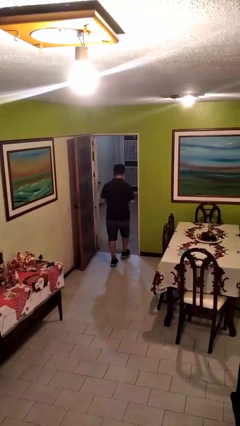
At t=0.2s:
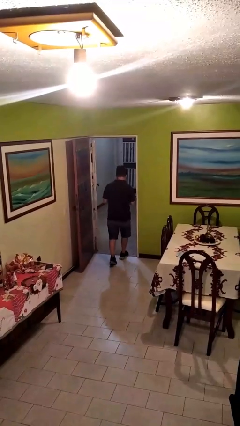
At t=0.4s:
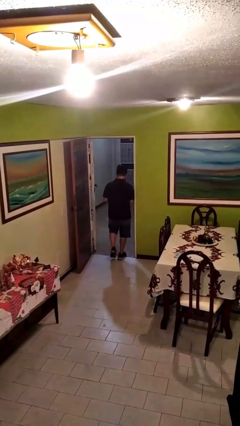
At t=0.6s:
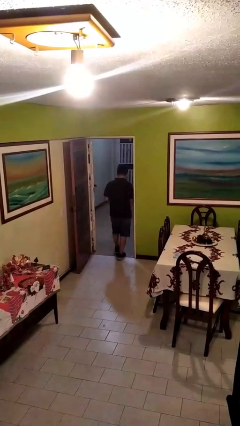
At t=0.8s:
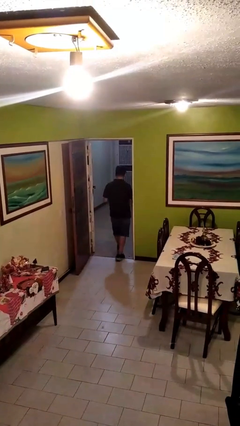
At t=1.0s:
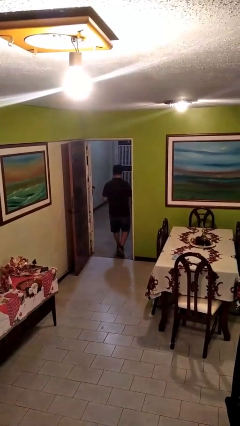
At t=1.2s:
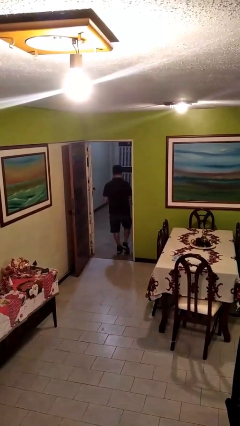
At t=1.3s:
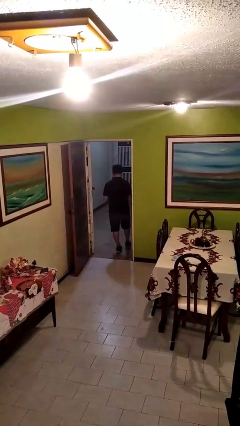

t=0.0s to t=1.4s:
person exits scene through structure

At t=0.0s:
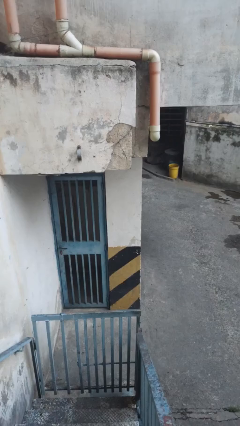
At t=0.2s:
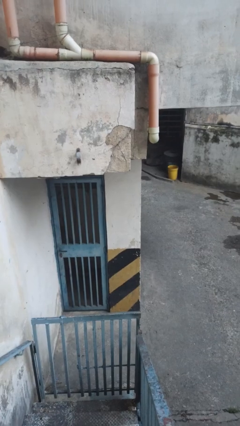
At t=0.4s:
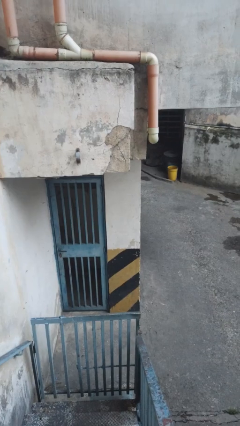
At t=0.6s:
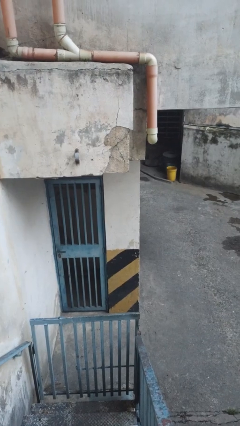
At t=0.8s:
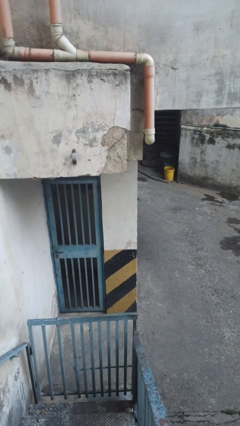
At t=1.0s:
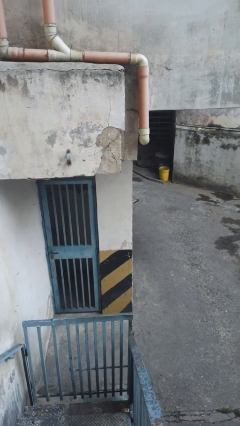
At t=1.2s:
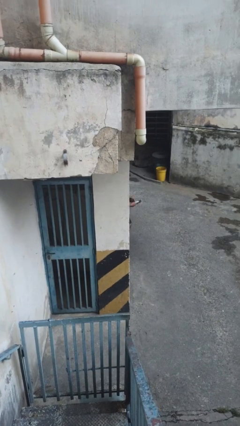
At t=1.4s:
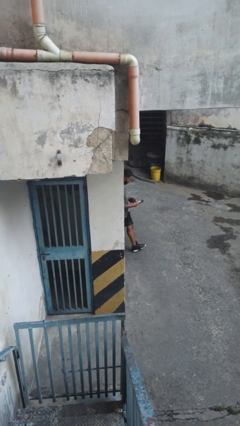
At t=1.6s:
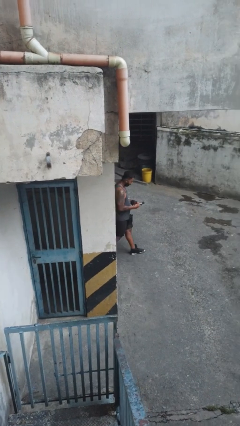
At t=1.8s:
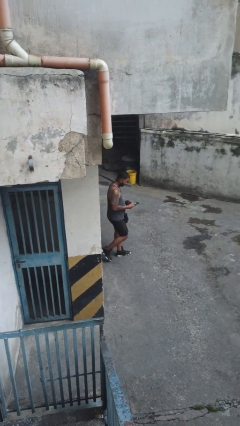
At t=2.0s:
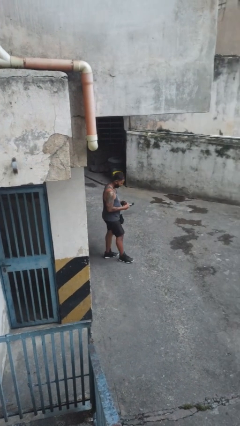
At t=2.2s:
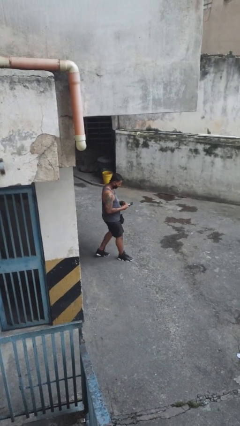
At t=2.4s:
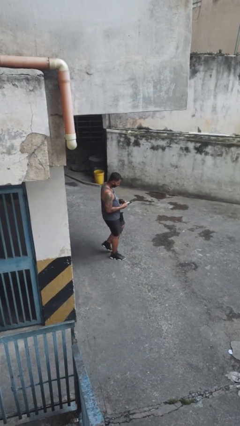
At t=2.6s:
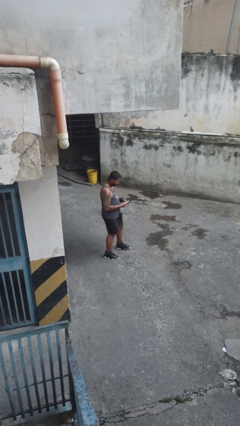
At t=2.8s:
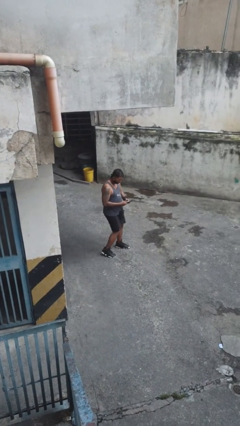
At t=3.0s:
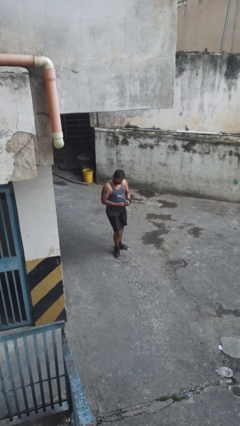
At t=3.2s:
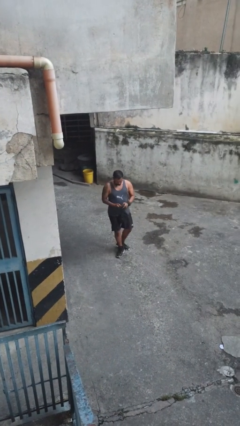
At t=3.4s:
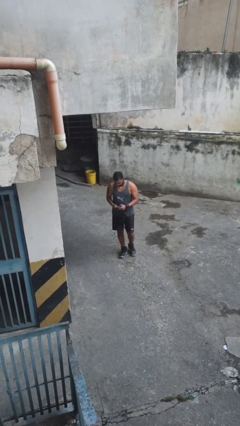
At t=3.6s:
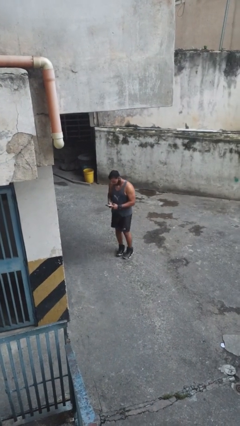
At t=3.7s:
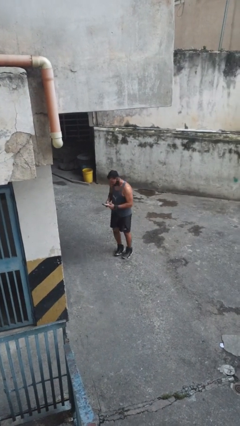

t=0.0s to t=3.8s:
person enters scene through structure

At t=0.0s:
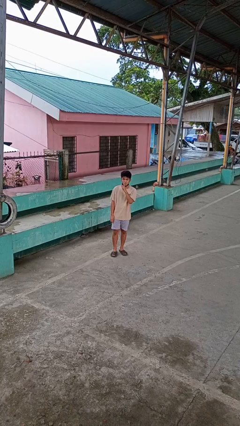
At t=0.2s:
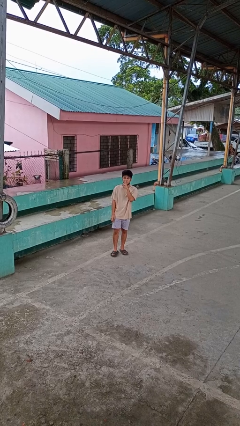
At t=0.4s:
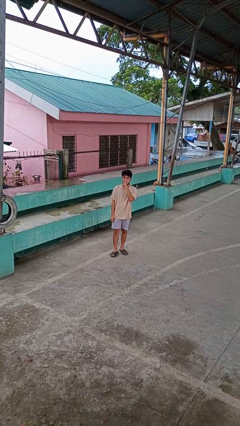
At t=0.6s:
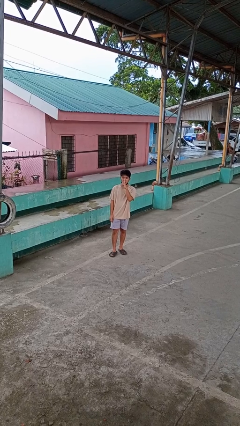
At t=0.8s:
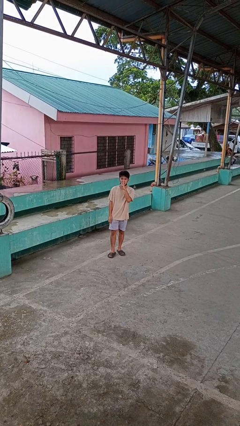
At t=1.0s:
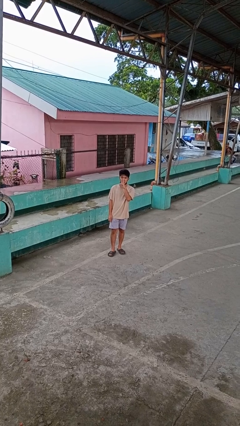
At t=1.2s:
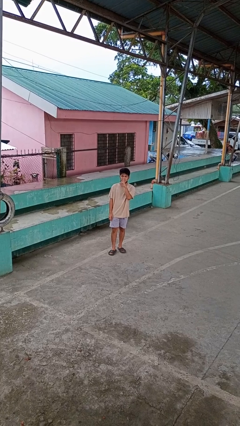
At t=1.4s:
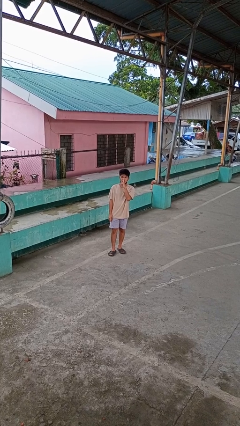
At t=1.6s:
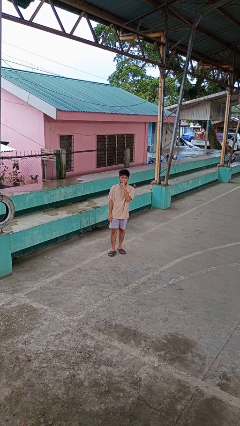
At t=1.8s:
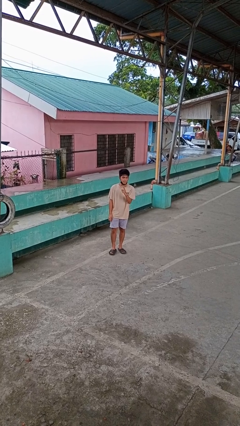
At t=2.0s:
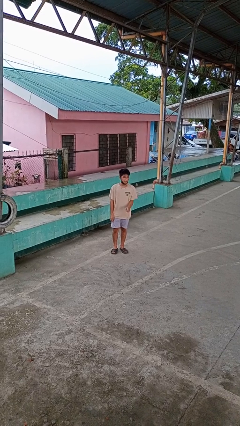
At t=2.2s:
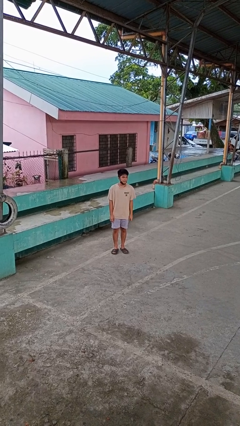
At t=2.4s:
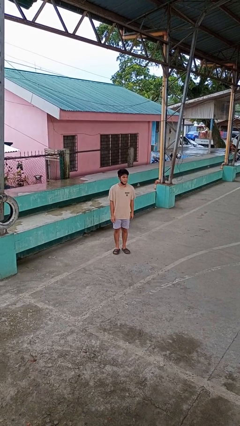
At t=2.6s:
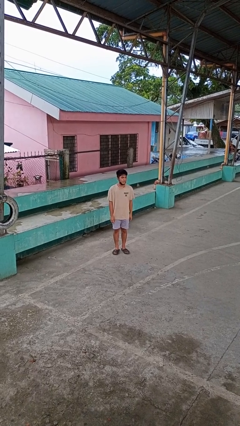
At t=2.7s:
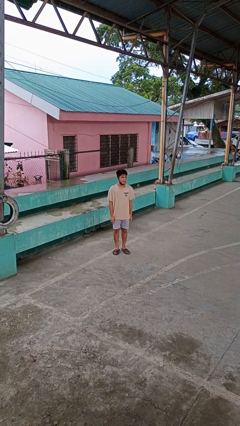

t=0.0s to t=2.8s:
person gestures be quiet

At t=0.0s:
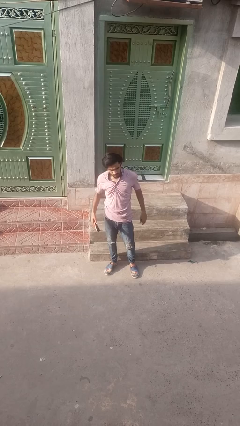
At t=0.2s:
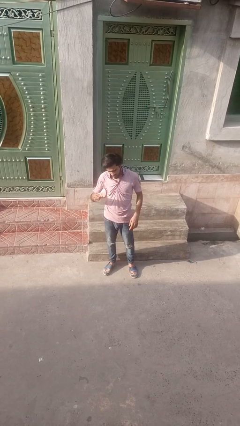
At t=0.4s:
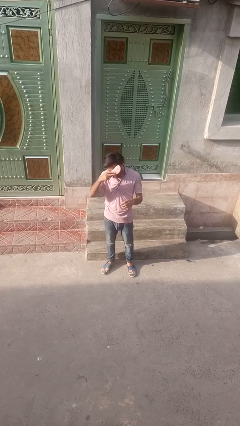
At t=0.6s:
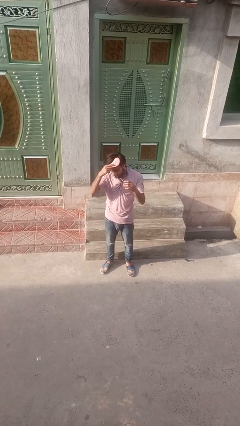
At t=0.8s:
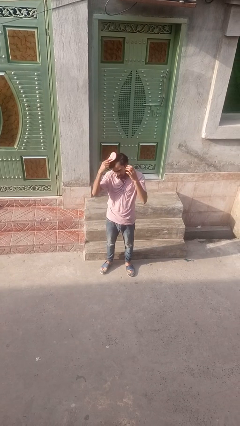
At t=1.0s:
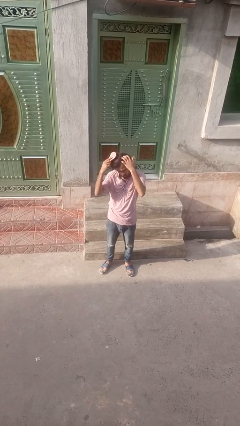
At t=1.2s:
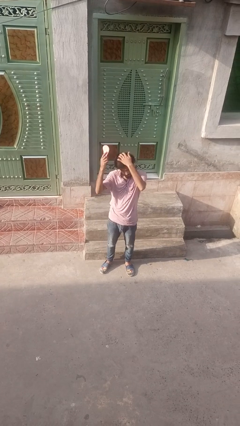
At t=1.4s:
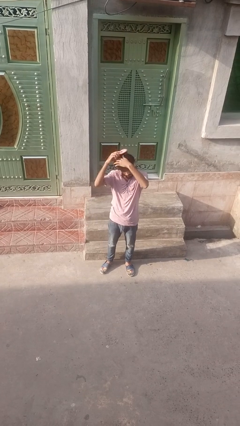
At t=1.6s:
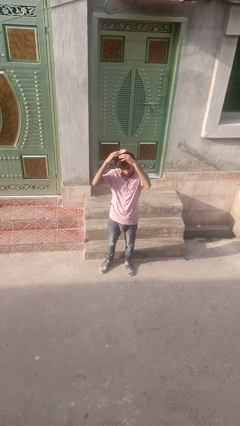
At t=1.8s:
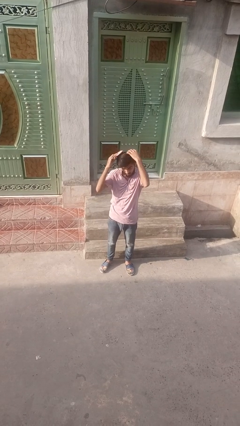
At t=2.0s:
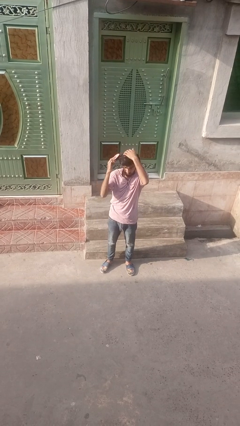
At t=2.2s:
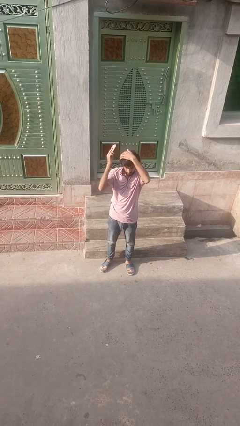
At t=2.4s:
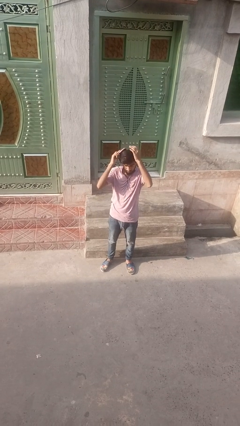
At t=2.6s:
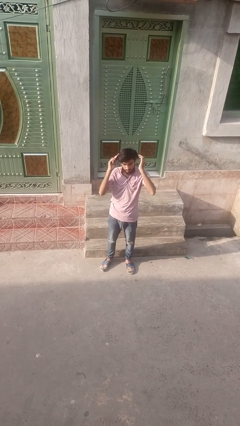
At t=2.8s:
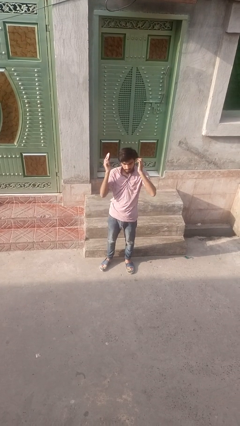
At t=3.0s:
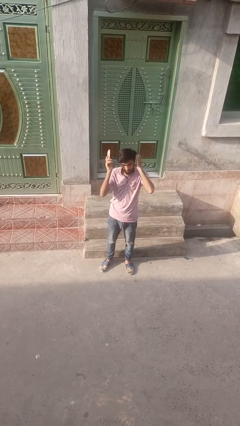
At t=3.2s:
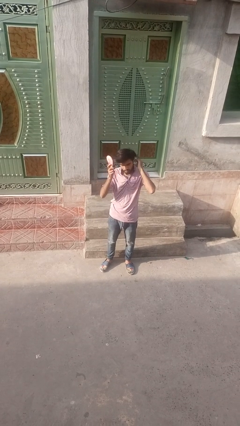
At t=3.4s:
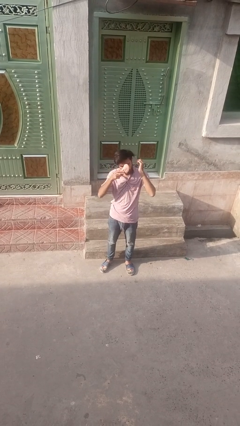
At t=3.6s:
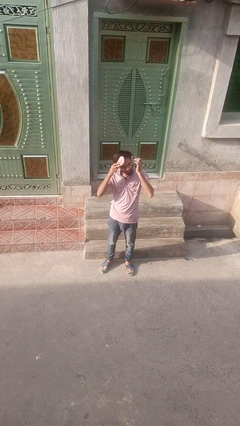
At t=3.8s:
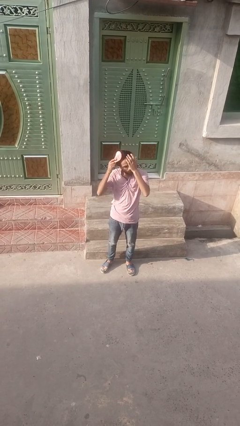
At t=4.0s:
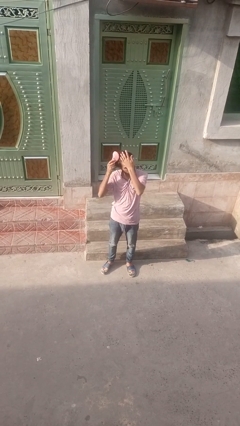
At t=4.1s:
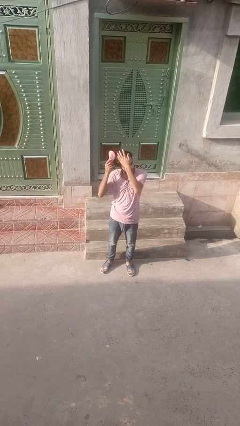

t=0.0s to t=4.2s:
person brushes hair

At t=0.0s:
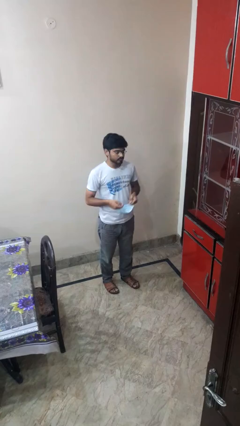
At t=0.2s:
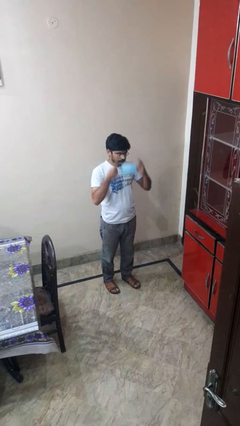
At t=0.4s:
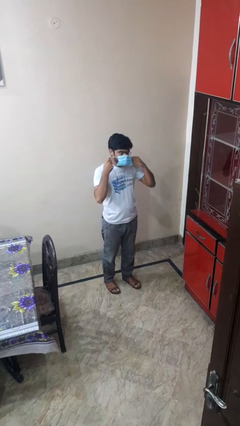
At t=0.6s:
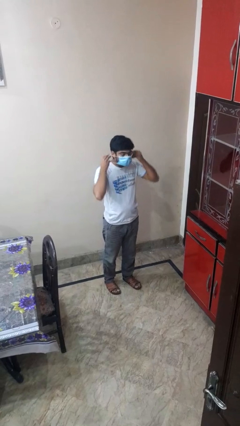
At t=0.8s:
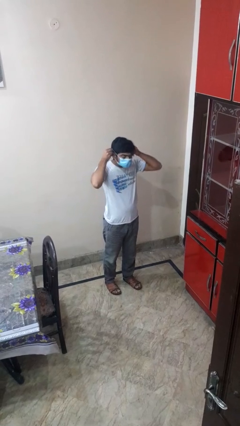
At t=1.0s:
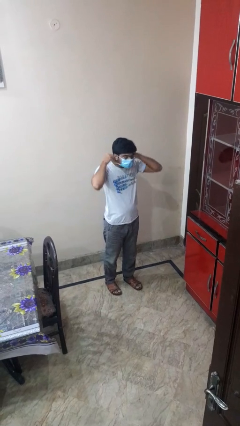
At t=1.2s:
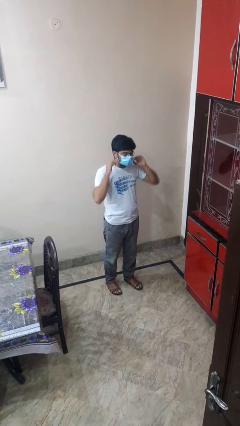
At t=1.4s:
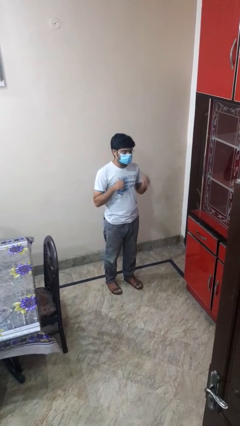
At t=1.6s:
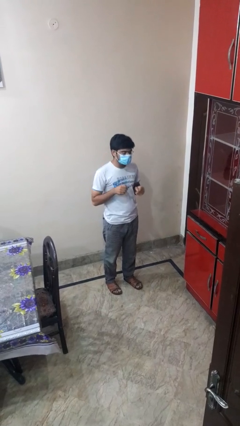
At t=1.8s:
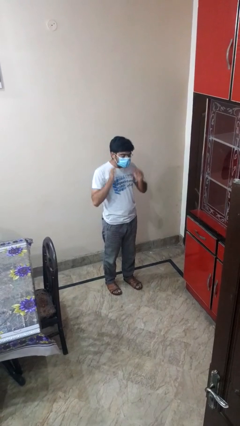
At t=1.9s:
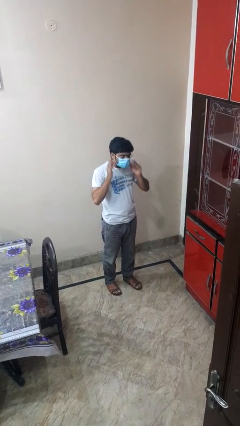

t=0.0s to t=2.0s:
person puts on facemask

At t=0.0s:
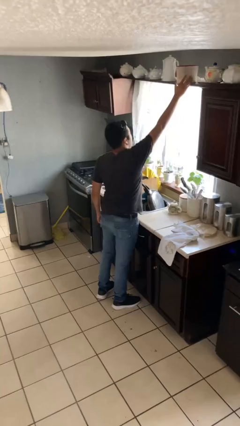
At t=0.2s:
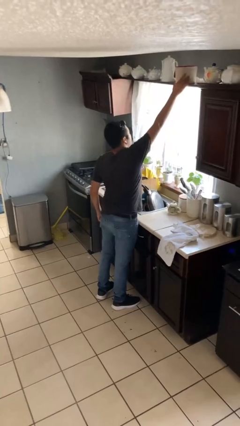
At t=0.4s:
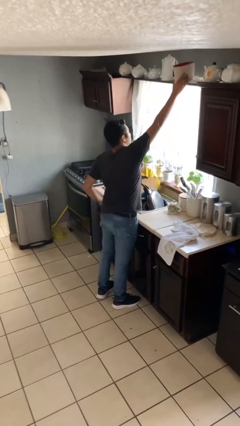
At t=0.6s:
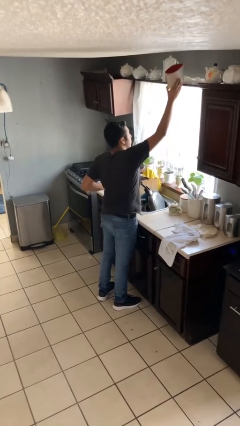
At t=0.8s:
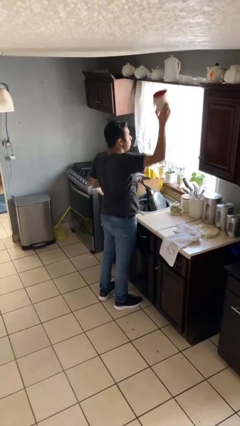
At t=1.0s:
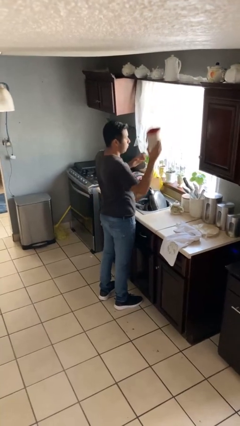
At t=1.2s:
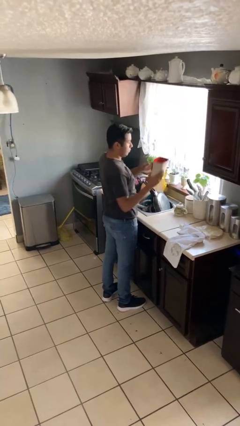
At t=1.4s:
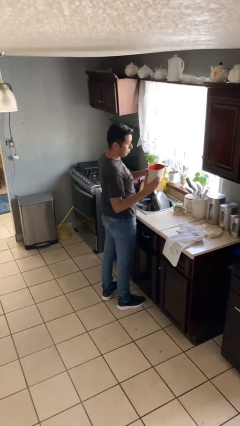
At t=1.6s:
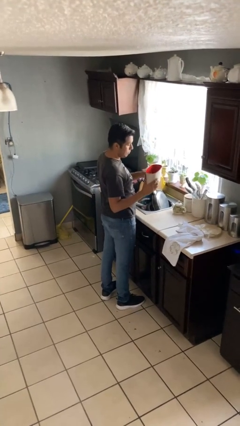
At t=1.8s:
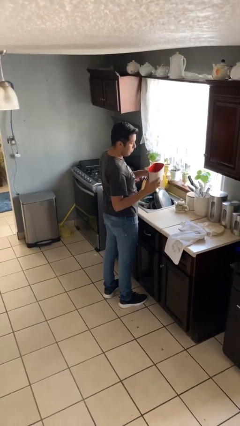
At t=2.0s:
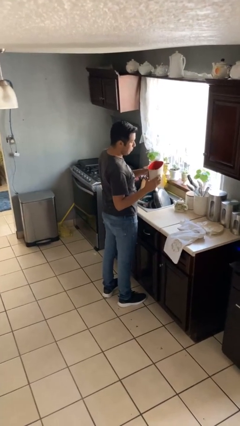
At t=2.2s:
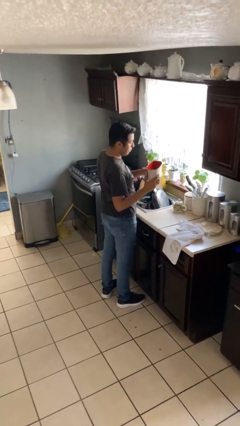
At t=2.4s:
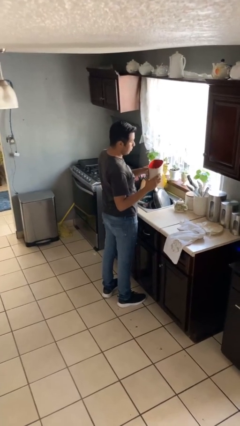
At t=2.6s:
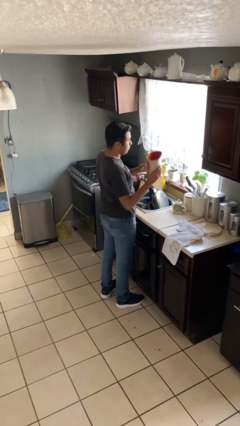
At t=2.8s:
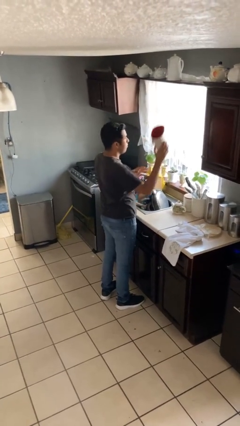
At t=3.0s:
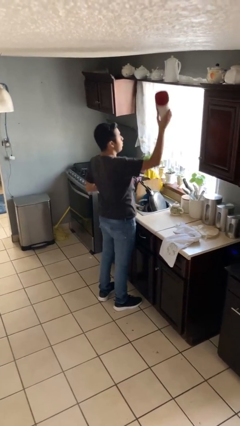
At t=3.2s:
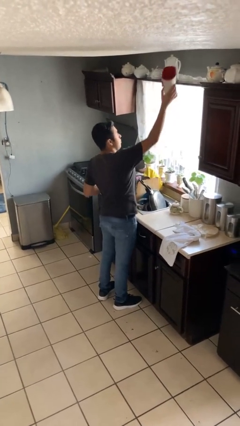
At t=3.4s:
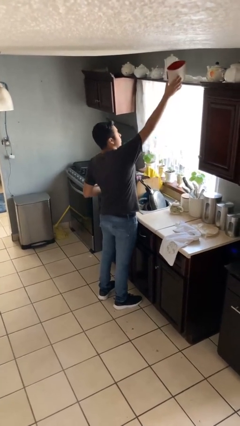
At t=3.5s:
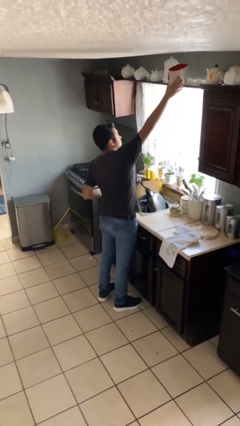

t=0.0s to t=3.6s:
person picks up object from countertop
